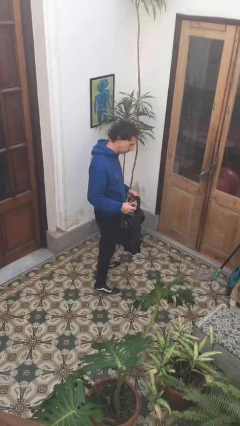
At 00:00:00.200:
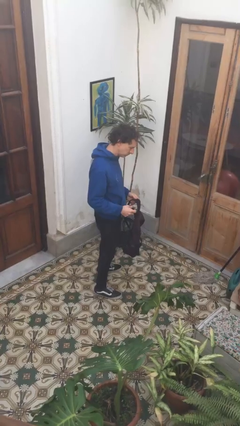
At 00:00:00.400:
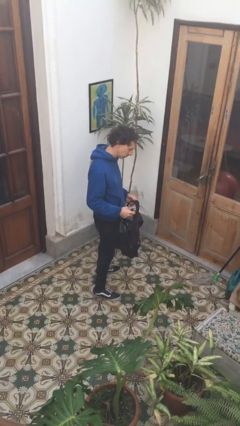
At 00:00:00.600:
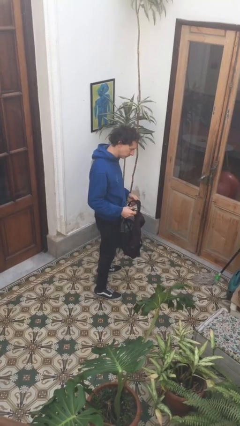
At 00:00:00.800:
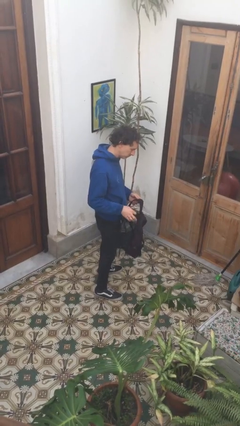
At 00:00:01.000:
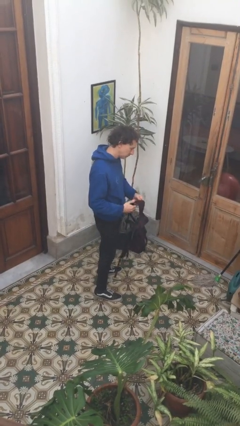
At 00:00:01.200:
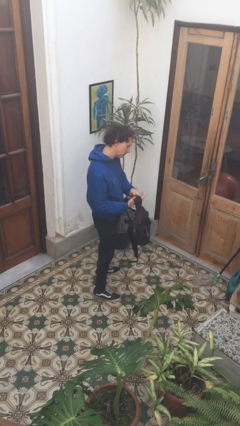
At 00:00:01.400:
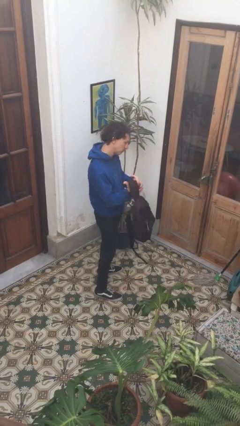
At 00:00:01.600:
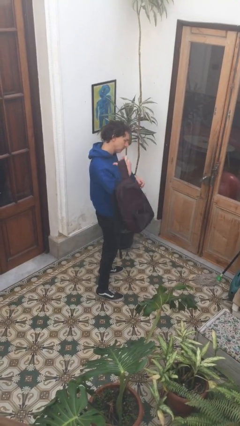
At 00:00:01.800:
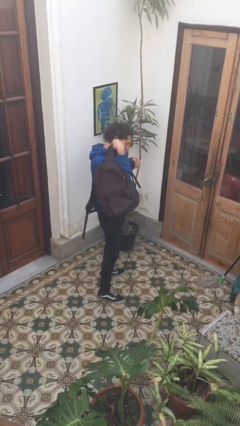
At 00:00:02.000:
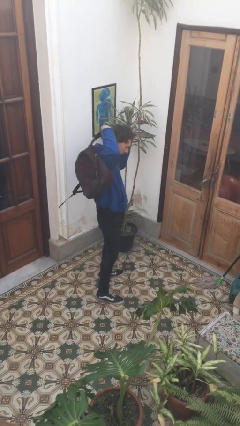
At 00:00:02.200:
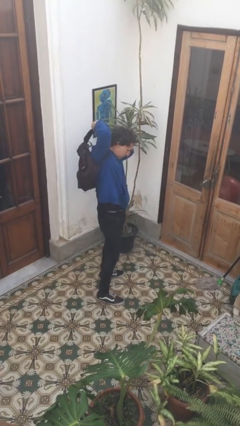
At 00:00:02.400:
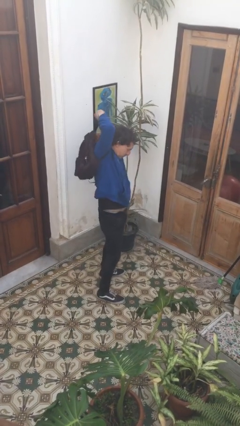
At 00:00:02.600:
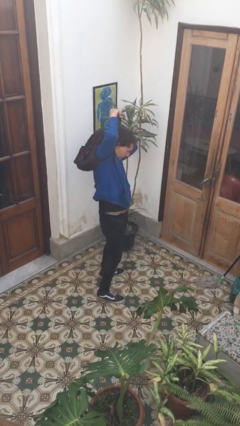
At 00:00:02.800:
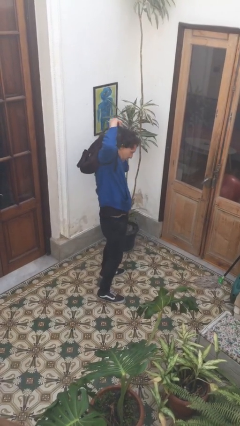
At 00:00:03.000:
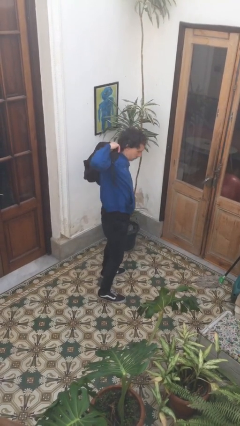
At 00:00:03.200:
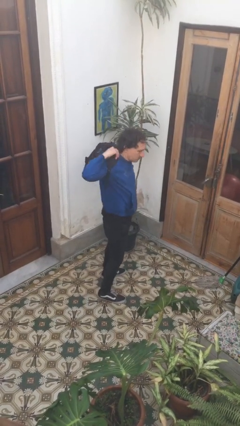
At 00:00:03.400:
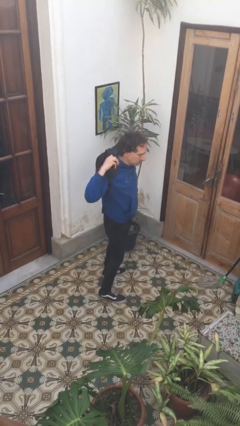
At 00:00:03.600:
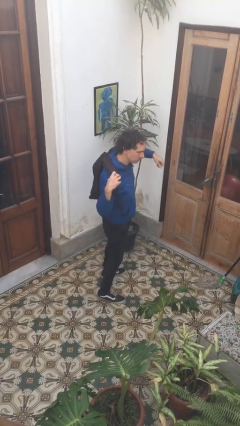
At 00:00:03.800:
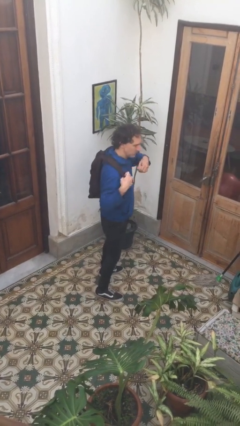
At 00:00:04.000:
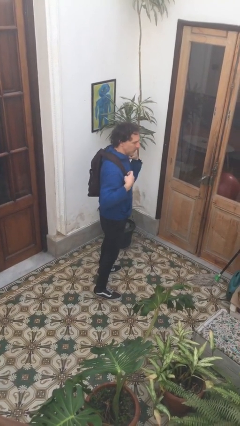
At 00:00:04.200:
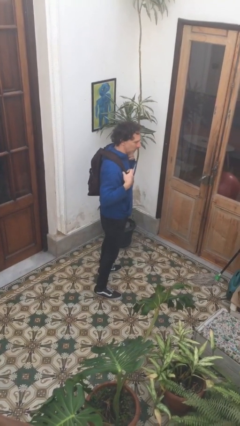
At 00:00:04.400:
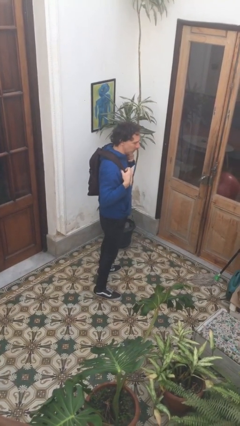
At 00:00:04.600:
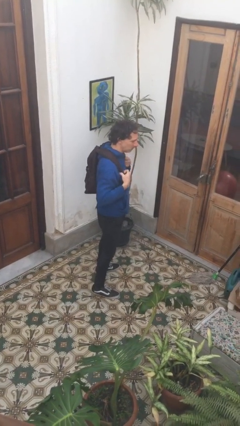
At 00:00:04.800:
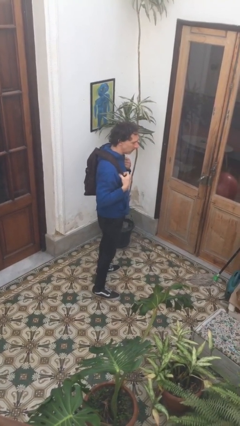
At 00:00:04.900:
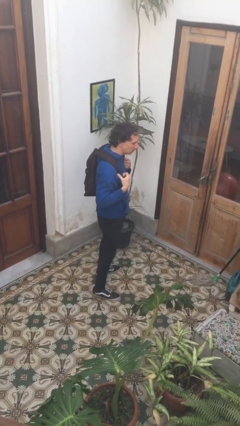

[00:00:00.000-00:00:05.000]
person puts on backpack

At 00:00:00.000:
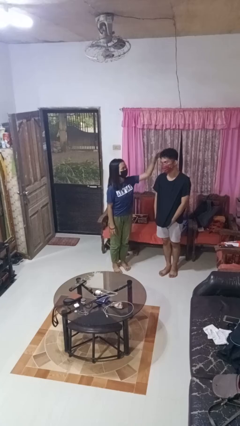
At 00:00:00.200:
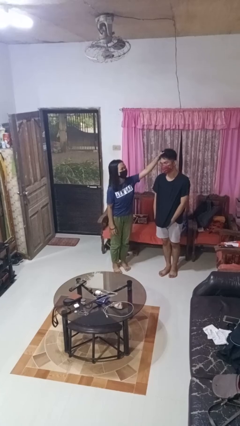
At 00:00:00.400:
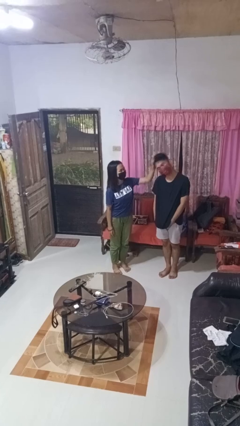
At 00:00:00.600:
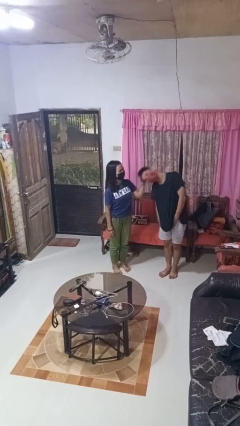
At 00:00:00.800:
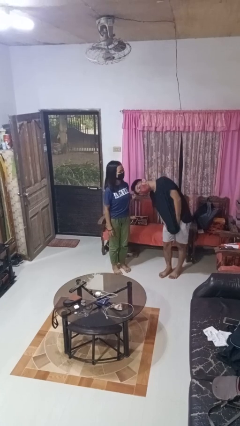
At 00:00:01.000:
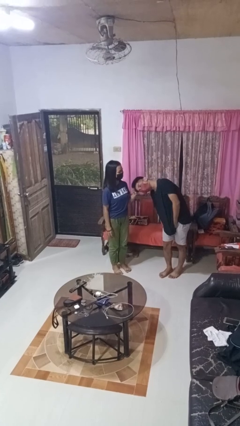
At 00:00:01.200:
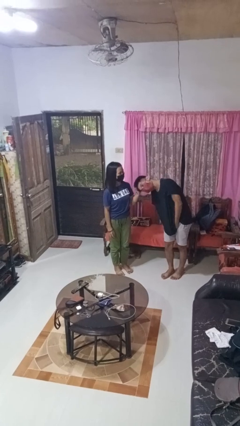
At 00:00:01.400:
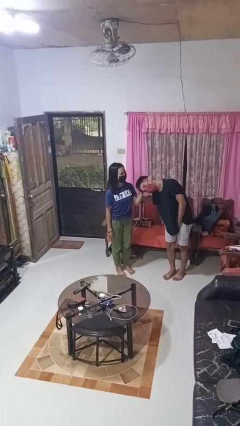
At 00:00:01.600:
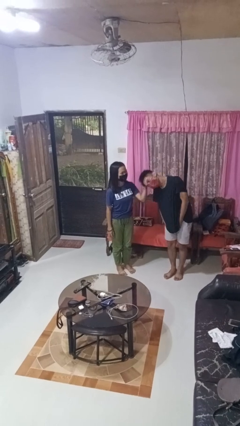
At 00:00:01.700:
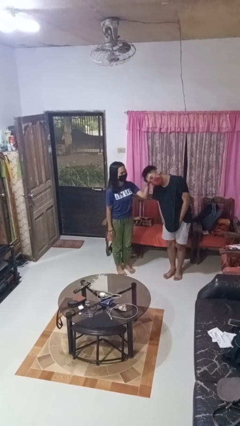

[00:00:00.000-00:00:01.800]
person grabs person by hair

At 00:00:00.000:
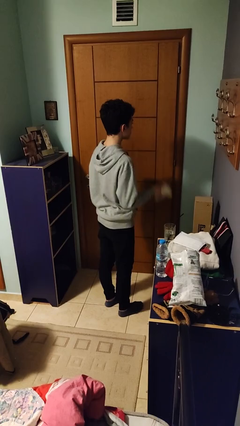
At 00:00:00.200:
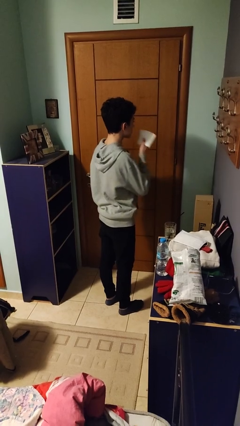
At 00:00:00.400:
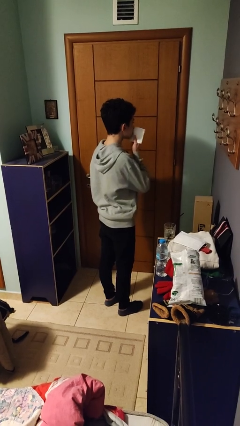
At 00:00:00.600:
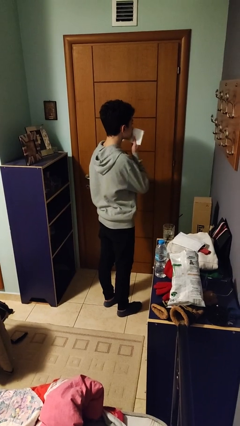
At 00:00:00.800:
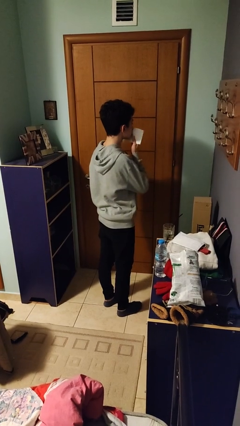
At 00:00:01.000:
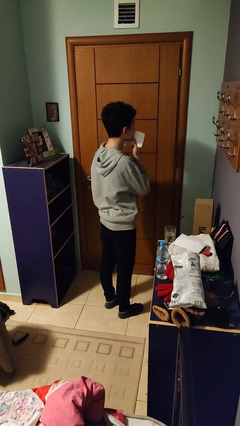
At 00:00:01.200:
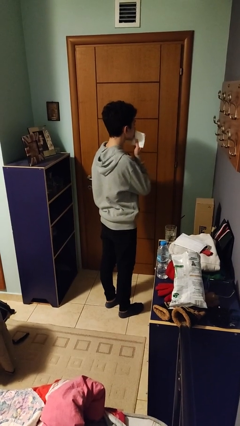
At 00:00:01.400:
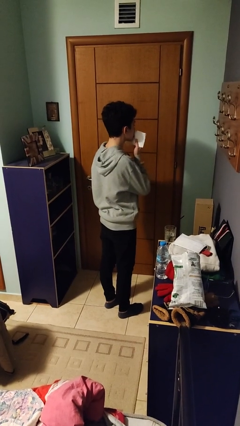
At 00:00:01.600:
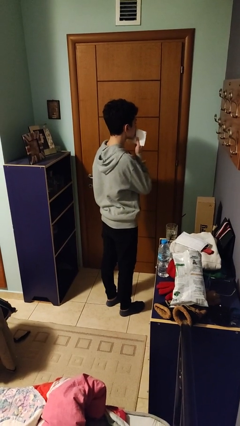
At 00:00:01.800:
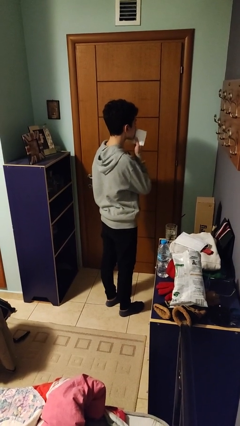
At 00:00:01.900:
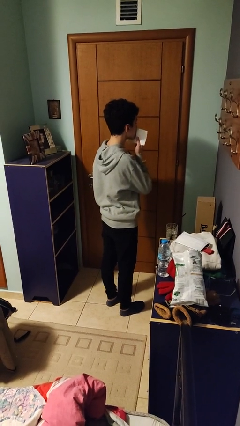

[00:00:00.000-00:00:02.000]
person wipes mouth with napkin

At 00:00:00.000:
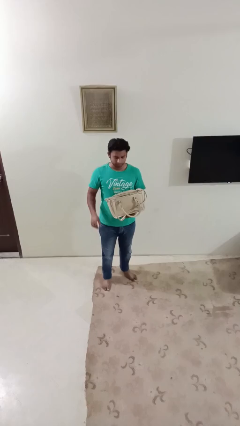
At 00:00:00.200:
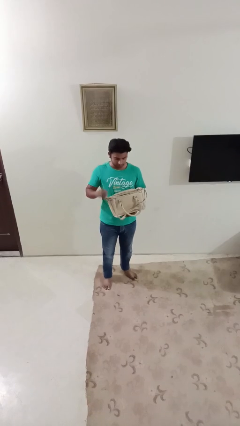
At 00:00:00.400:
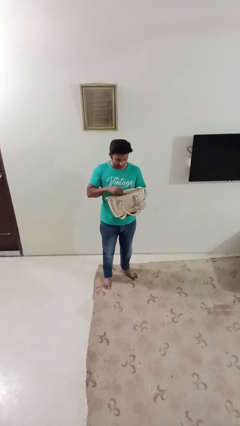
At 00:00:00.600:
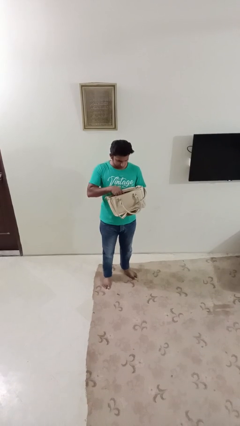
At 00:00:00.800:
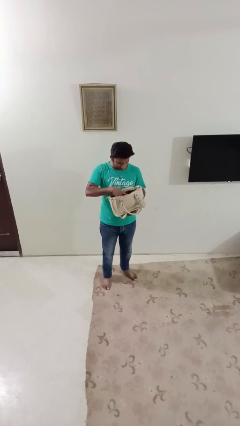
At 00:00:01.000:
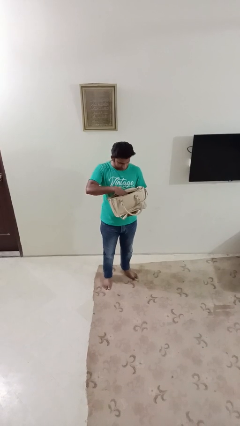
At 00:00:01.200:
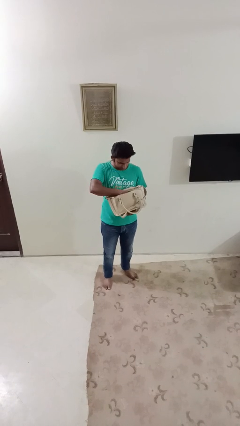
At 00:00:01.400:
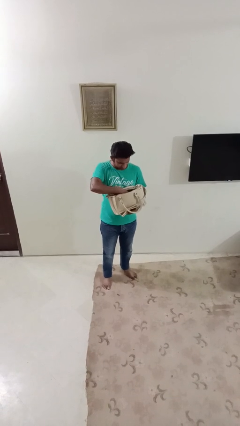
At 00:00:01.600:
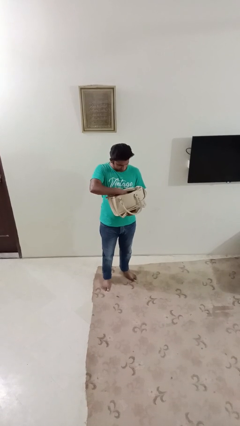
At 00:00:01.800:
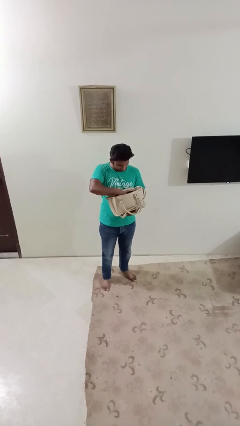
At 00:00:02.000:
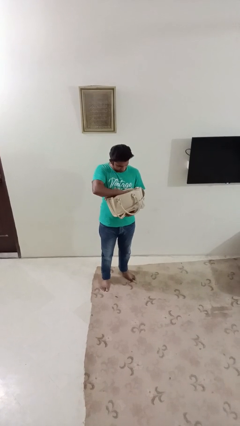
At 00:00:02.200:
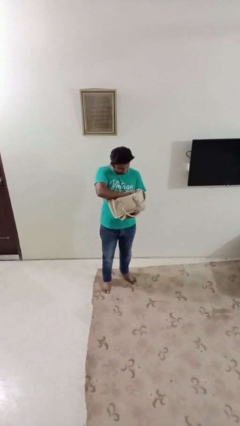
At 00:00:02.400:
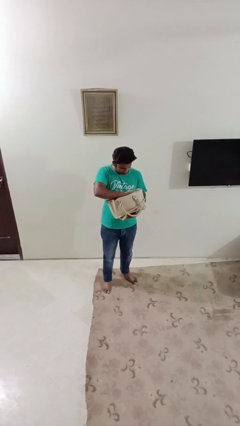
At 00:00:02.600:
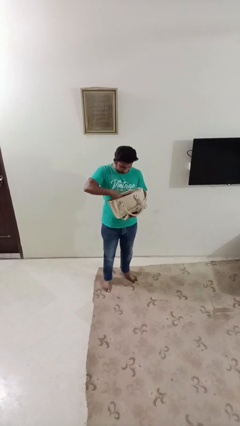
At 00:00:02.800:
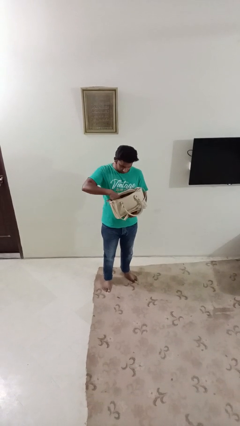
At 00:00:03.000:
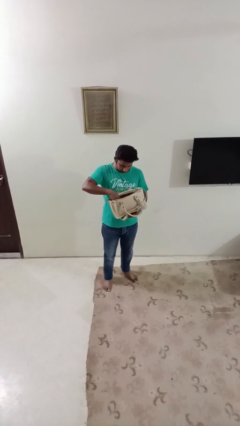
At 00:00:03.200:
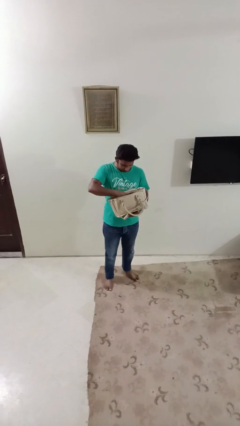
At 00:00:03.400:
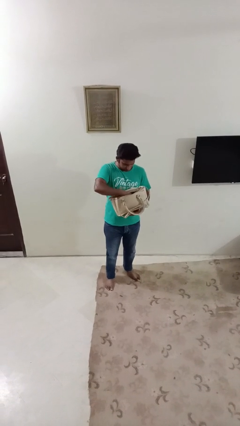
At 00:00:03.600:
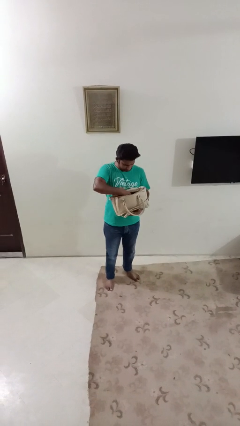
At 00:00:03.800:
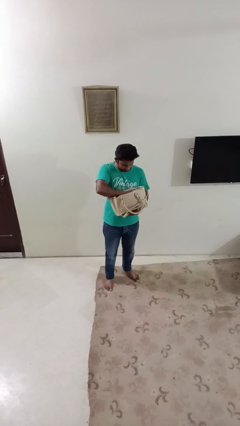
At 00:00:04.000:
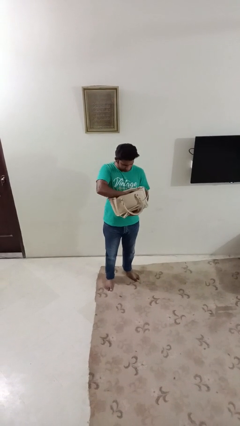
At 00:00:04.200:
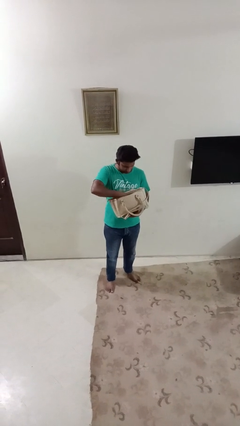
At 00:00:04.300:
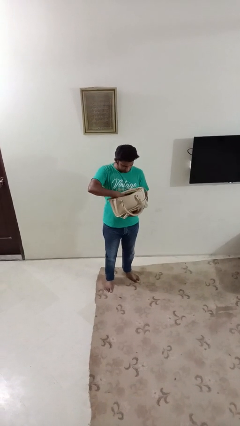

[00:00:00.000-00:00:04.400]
person searches in purse

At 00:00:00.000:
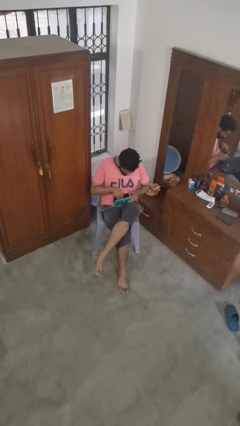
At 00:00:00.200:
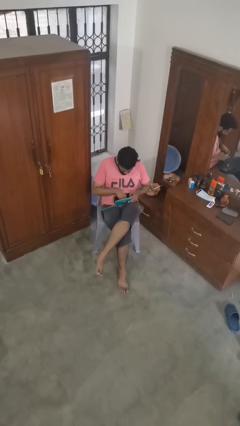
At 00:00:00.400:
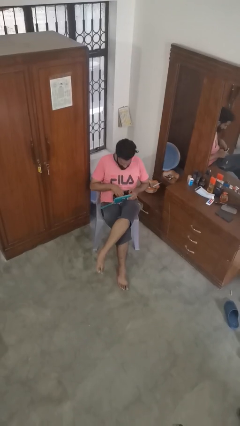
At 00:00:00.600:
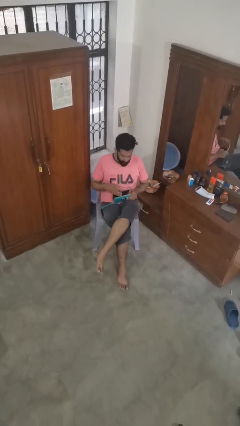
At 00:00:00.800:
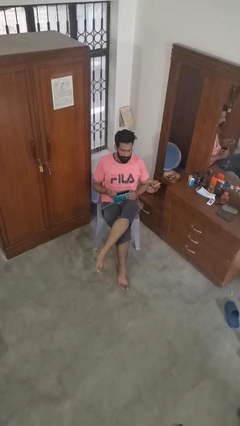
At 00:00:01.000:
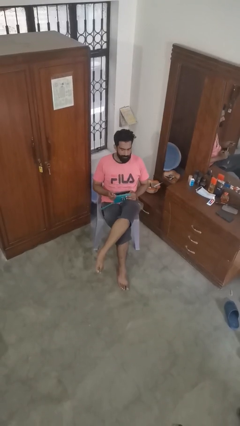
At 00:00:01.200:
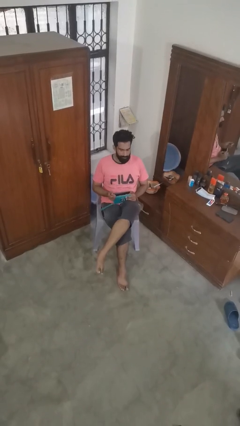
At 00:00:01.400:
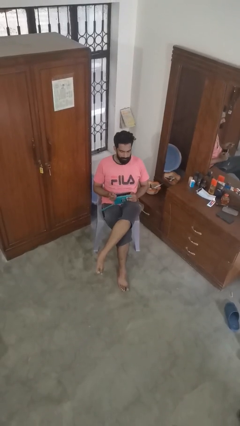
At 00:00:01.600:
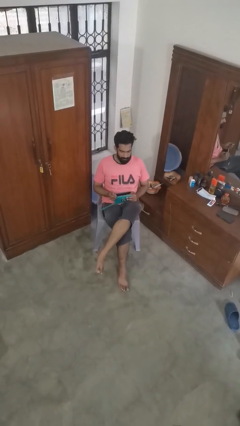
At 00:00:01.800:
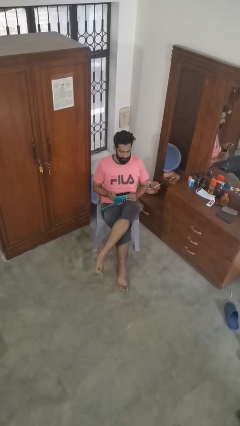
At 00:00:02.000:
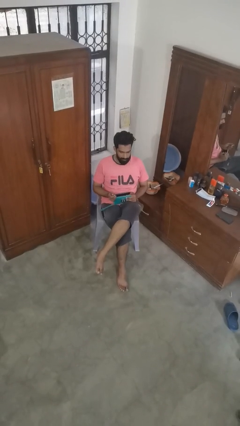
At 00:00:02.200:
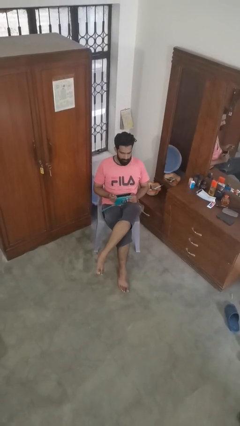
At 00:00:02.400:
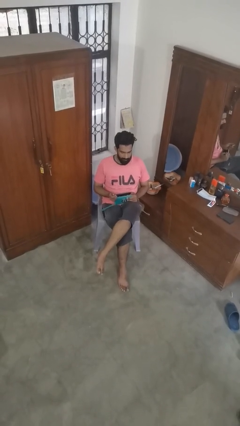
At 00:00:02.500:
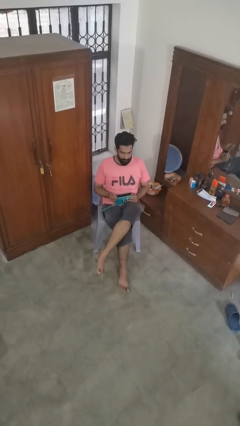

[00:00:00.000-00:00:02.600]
person takes object from purse

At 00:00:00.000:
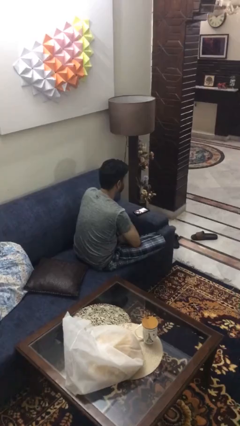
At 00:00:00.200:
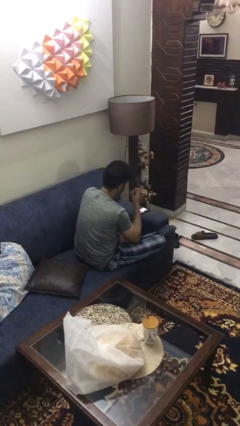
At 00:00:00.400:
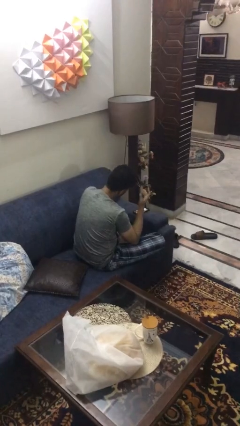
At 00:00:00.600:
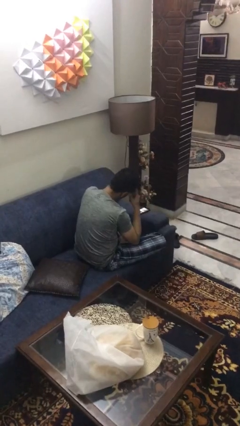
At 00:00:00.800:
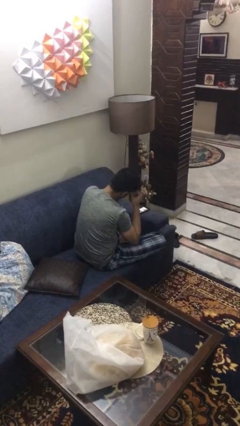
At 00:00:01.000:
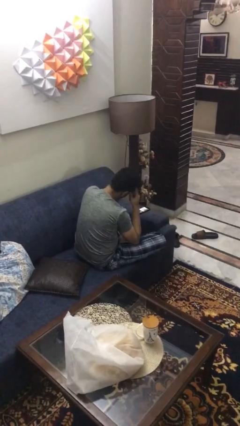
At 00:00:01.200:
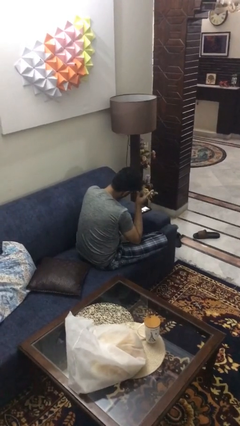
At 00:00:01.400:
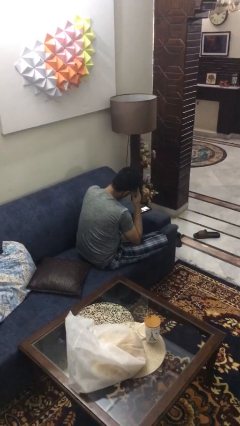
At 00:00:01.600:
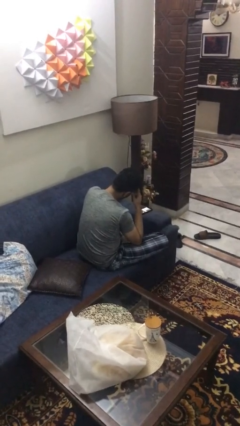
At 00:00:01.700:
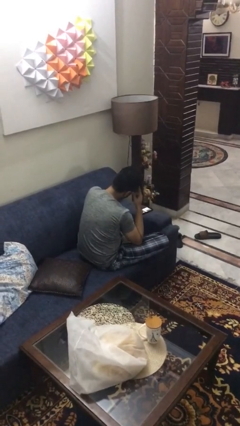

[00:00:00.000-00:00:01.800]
person strokes hair
